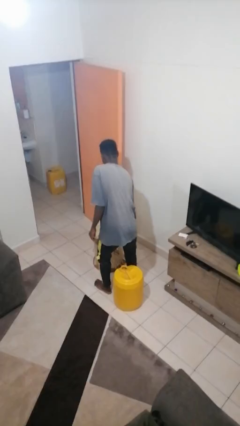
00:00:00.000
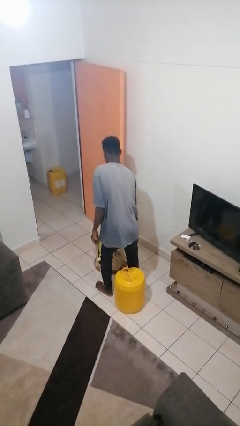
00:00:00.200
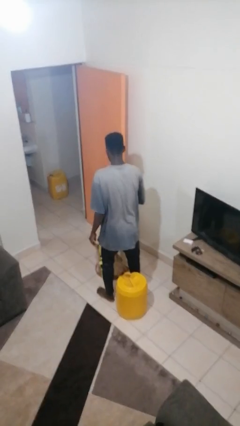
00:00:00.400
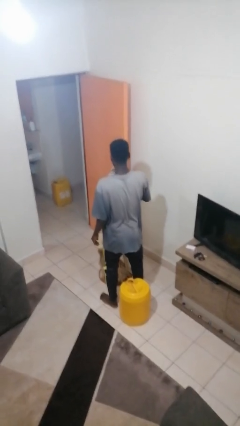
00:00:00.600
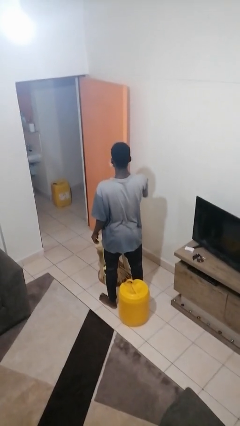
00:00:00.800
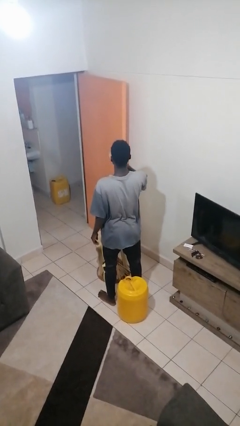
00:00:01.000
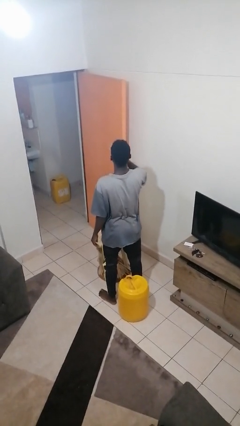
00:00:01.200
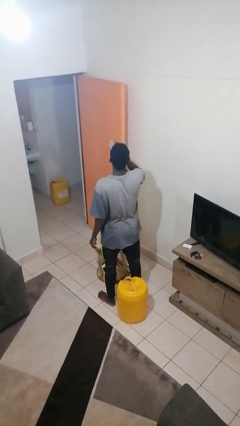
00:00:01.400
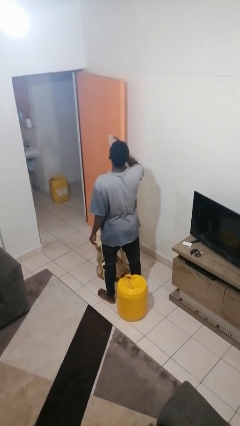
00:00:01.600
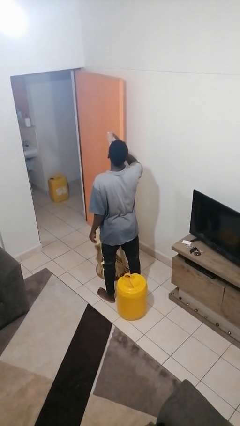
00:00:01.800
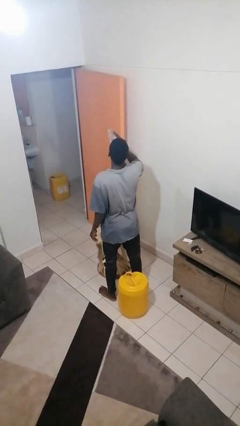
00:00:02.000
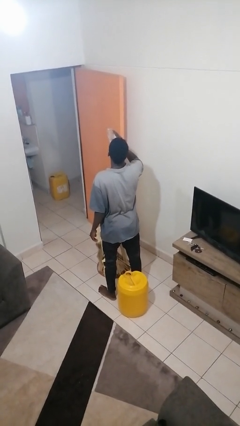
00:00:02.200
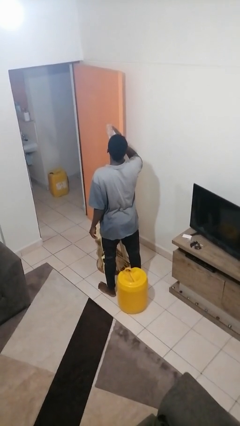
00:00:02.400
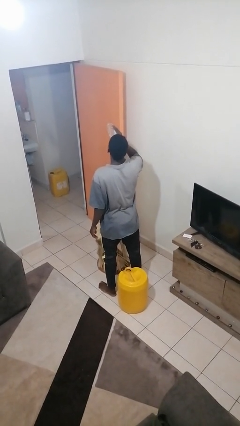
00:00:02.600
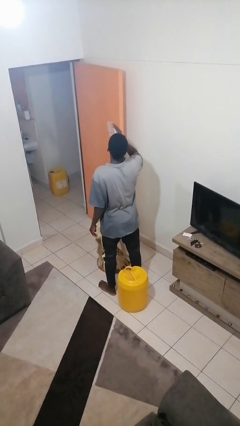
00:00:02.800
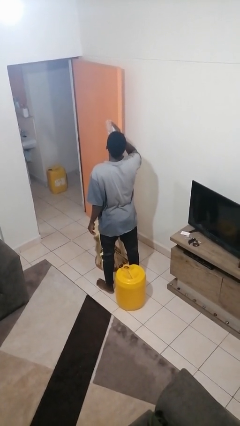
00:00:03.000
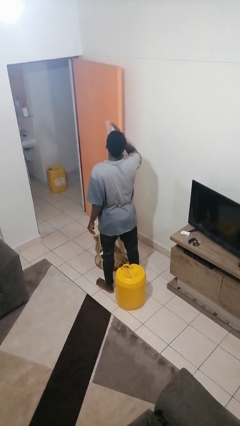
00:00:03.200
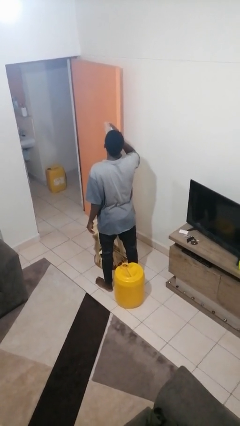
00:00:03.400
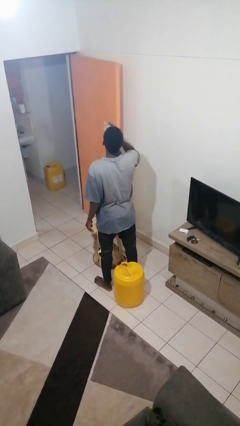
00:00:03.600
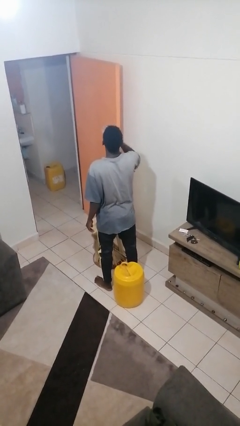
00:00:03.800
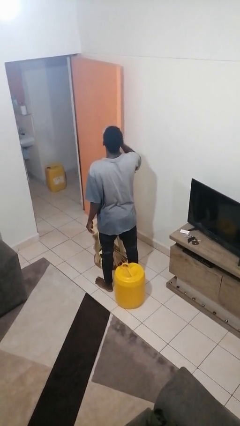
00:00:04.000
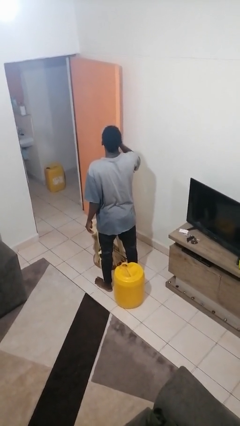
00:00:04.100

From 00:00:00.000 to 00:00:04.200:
person drinks from bottle

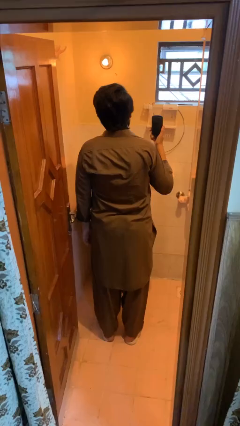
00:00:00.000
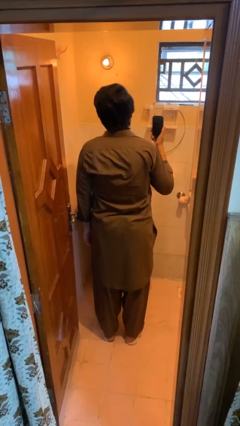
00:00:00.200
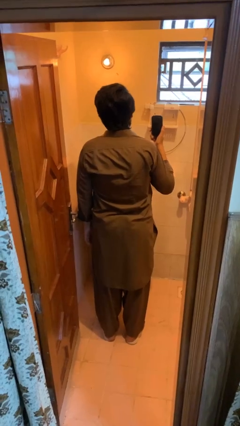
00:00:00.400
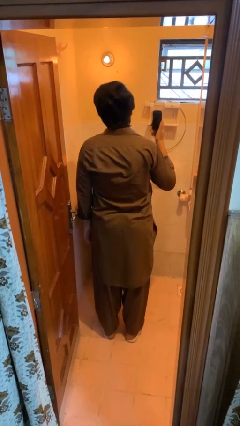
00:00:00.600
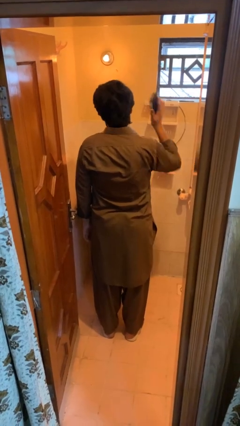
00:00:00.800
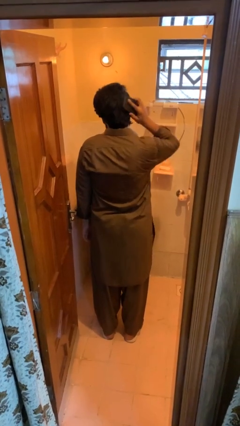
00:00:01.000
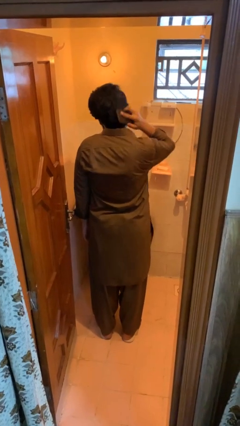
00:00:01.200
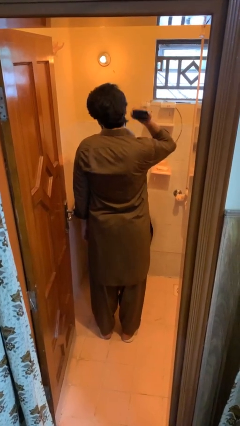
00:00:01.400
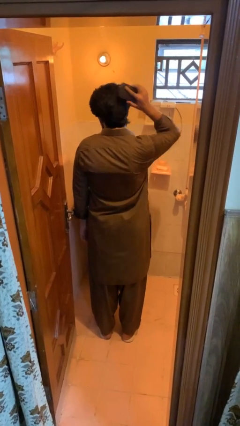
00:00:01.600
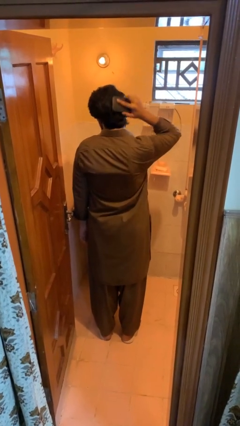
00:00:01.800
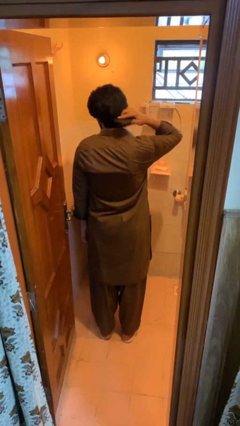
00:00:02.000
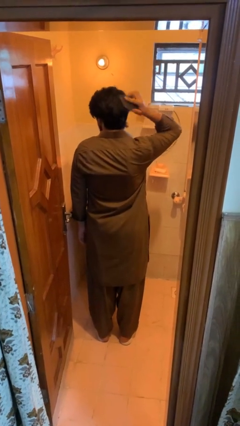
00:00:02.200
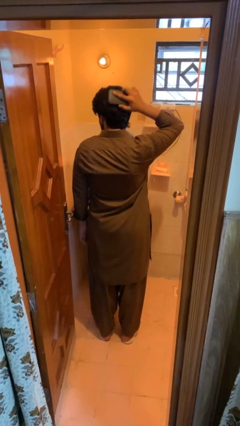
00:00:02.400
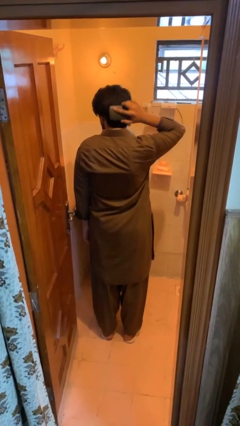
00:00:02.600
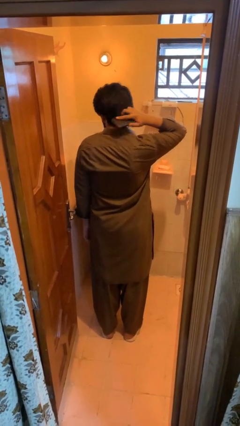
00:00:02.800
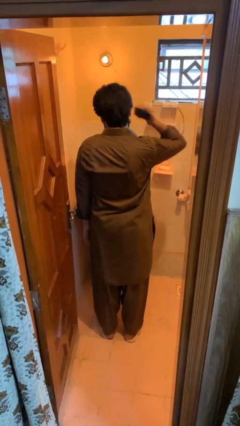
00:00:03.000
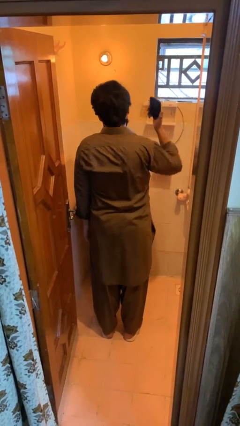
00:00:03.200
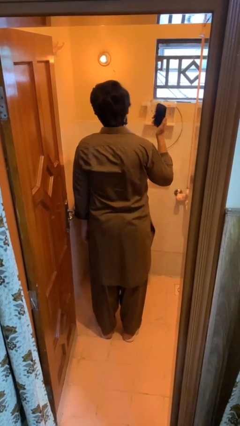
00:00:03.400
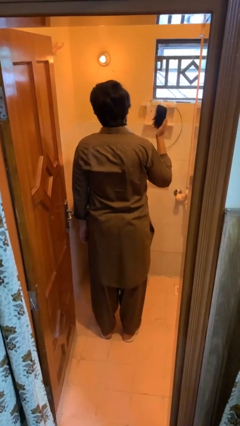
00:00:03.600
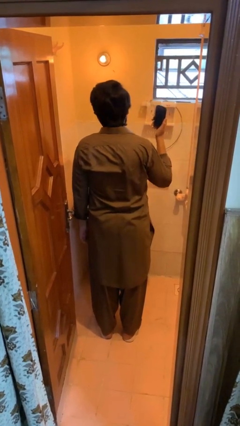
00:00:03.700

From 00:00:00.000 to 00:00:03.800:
person brushes hair

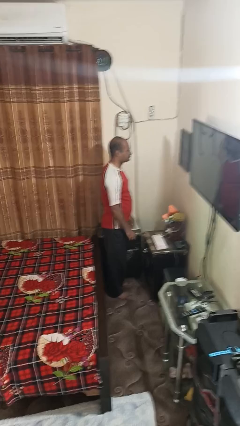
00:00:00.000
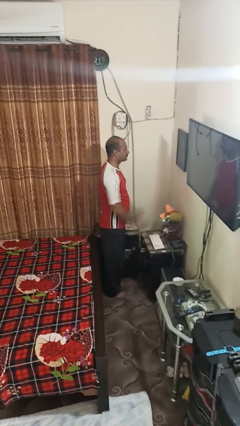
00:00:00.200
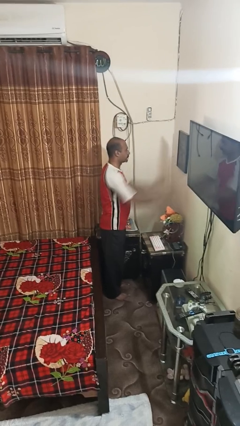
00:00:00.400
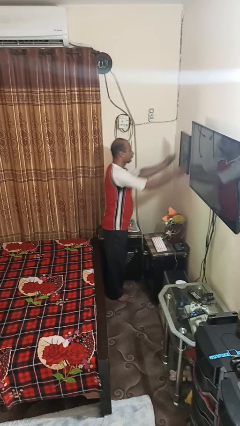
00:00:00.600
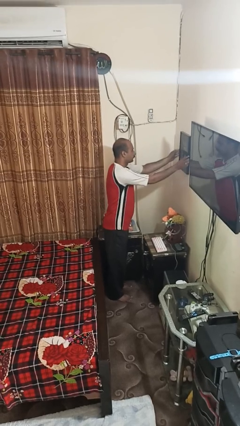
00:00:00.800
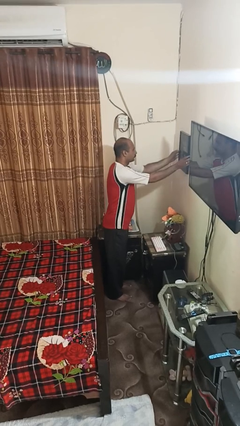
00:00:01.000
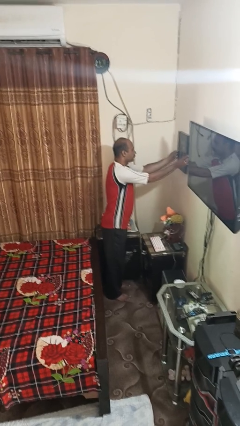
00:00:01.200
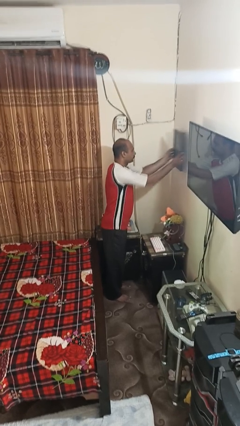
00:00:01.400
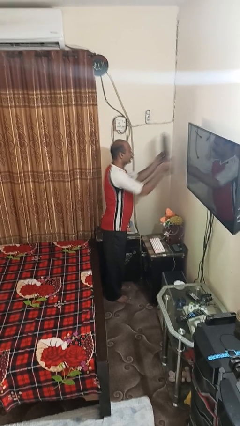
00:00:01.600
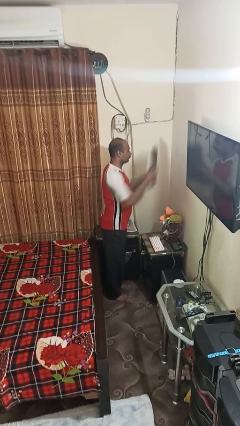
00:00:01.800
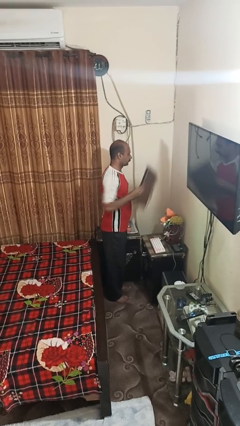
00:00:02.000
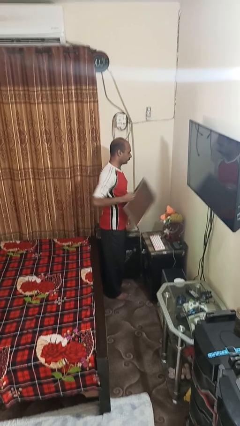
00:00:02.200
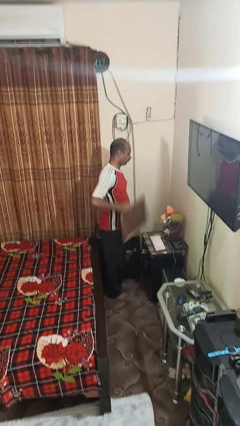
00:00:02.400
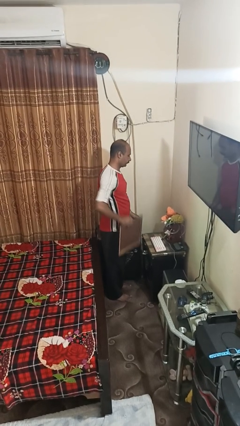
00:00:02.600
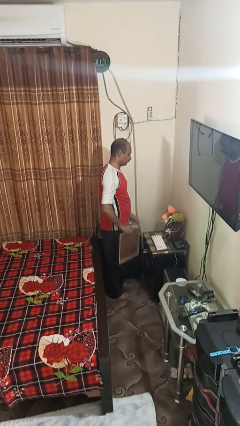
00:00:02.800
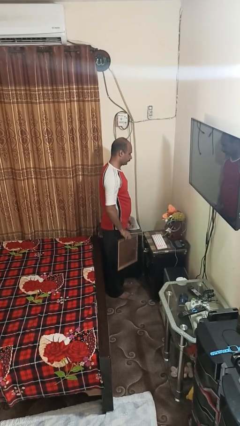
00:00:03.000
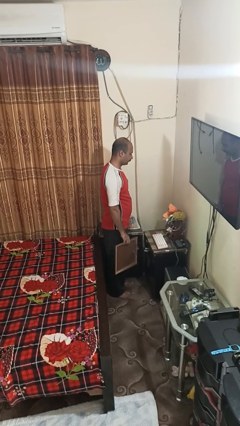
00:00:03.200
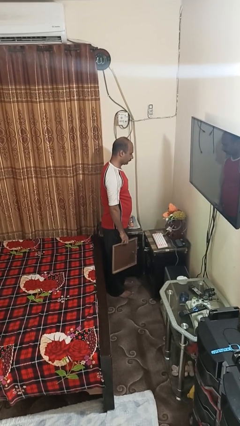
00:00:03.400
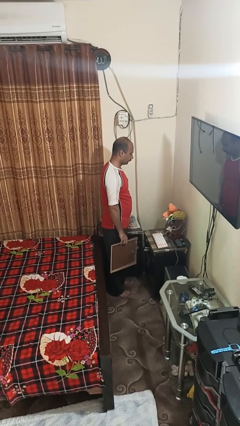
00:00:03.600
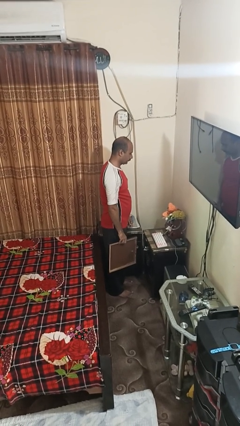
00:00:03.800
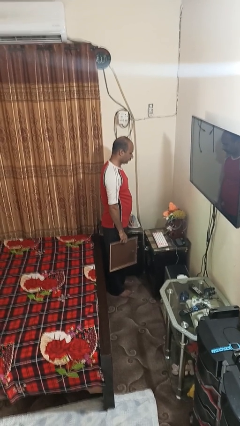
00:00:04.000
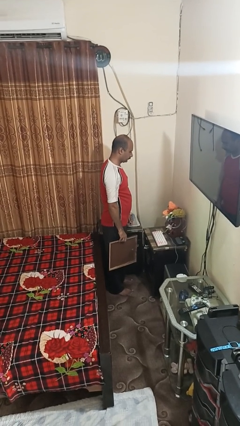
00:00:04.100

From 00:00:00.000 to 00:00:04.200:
person takes down picture frame

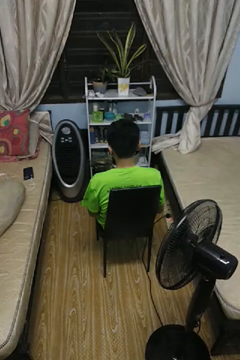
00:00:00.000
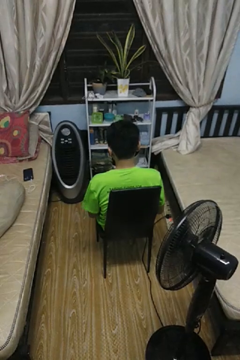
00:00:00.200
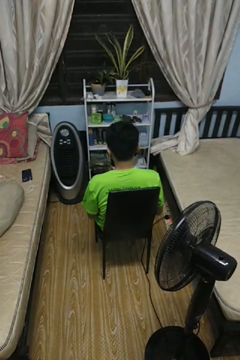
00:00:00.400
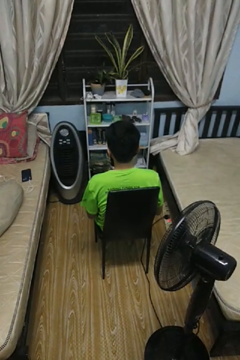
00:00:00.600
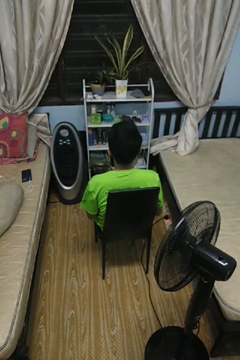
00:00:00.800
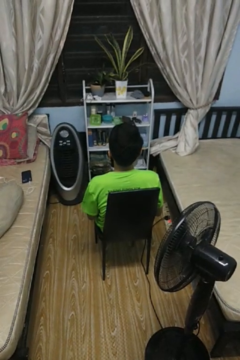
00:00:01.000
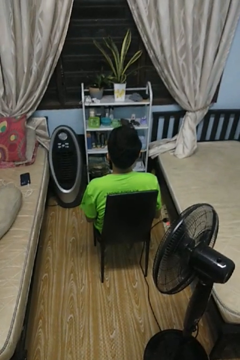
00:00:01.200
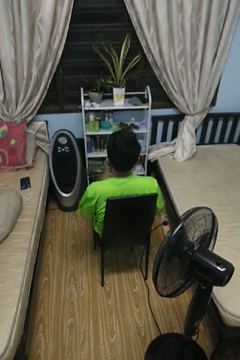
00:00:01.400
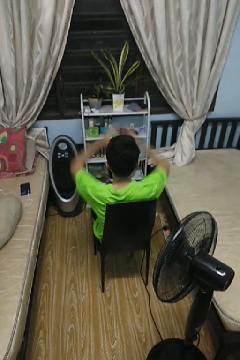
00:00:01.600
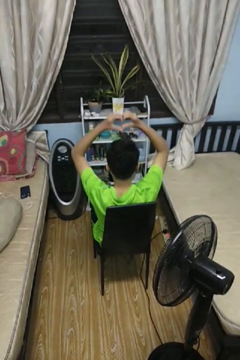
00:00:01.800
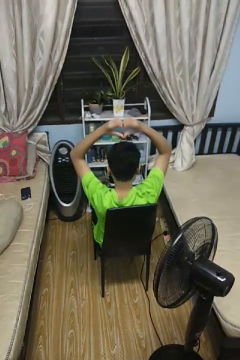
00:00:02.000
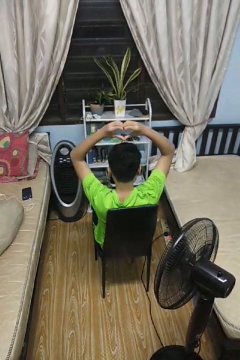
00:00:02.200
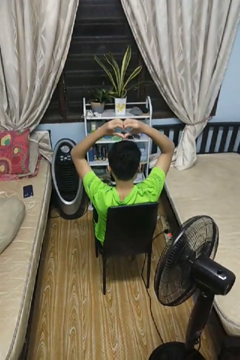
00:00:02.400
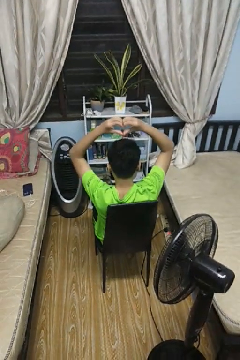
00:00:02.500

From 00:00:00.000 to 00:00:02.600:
person gestures heart

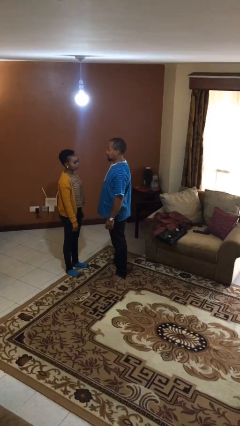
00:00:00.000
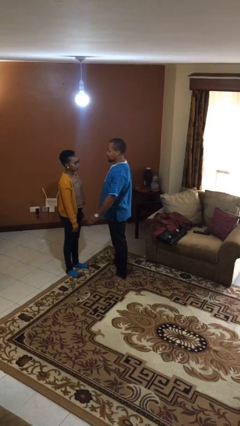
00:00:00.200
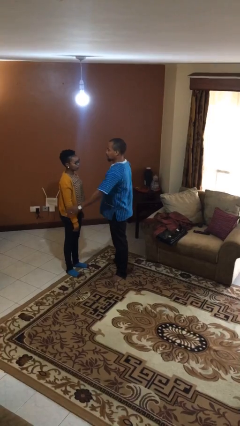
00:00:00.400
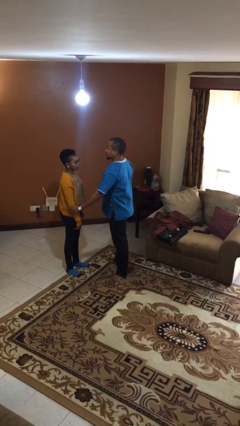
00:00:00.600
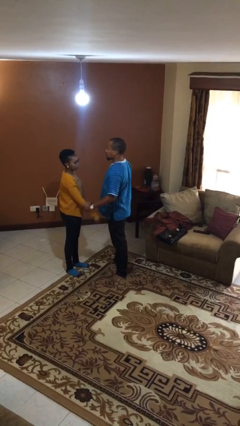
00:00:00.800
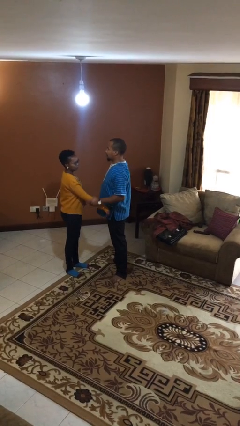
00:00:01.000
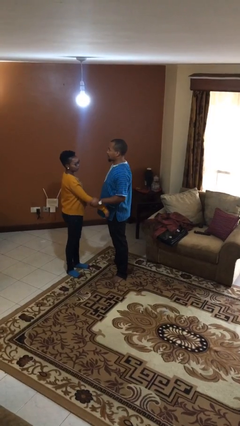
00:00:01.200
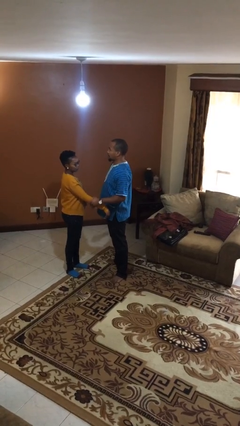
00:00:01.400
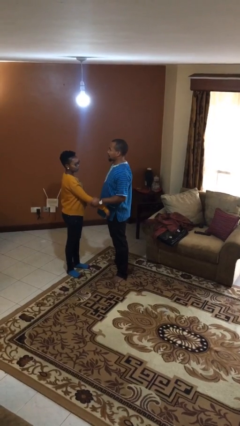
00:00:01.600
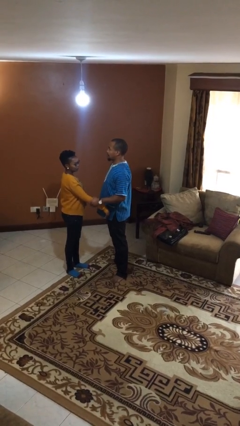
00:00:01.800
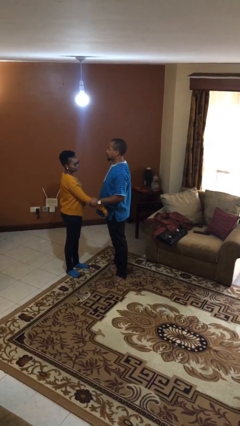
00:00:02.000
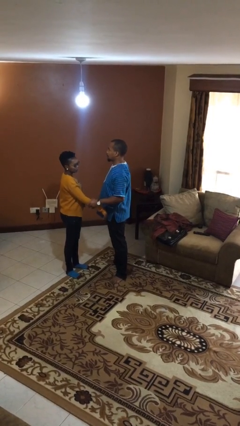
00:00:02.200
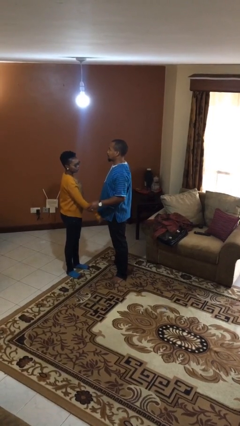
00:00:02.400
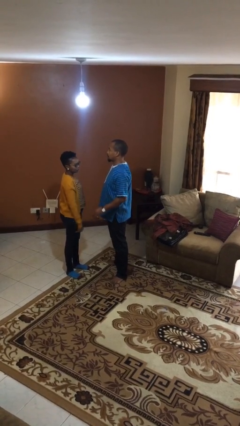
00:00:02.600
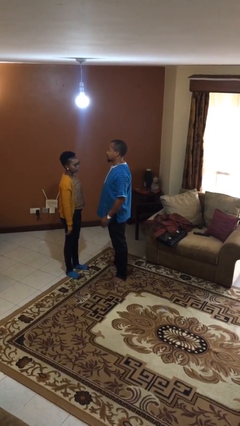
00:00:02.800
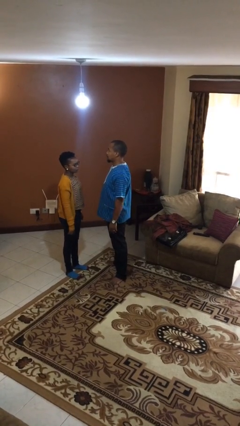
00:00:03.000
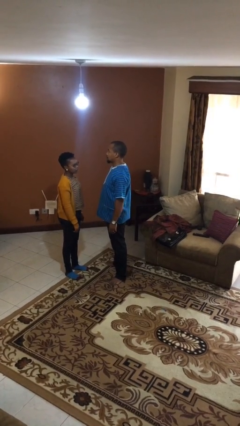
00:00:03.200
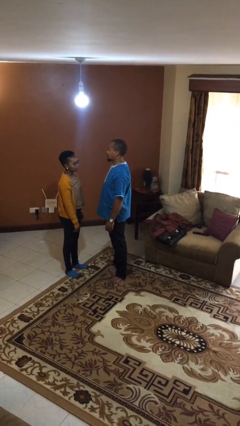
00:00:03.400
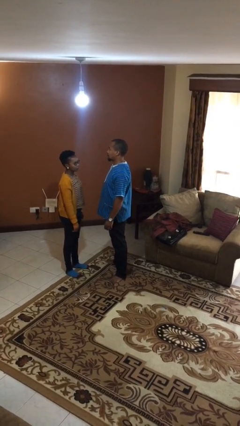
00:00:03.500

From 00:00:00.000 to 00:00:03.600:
person grabs person by forearm
